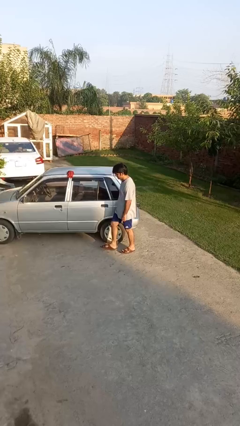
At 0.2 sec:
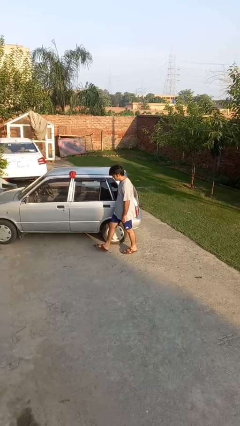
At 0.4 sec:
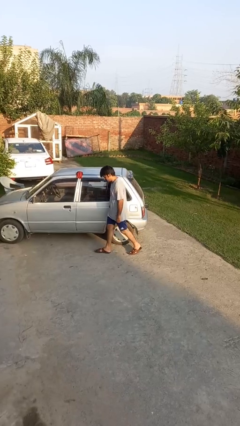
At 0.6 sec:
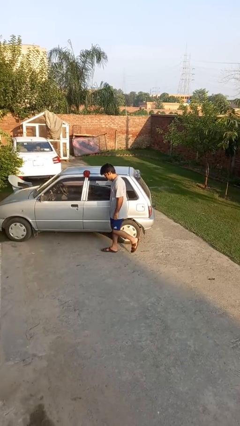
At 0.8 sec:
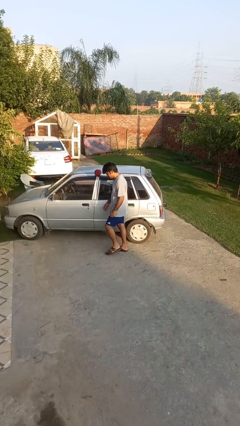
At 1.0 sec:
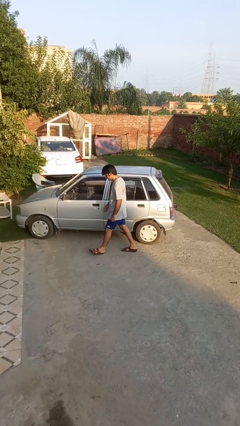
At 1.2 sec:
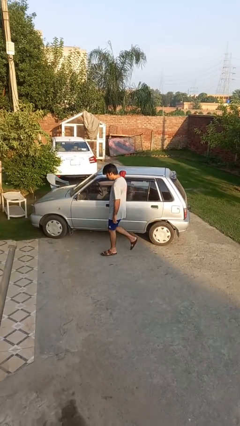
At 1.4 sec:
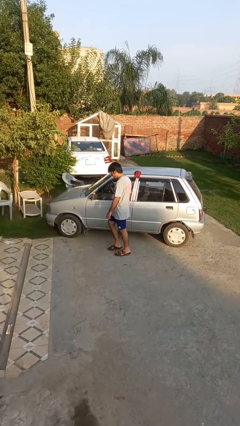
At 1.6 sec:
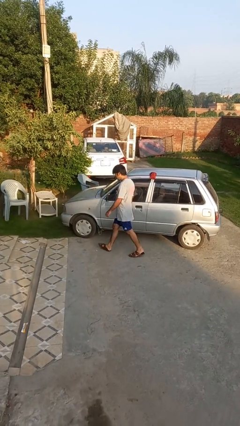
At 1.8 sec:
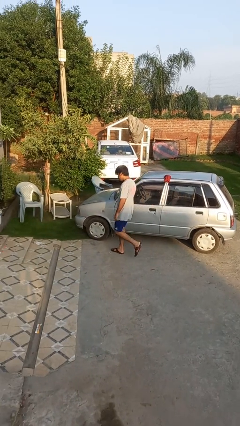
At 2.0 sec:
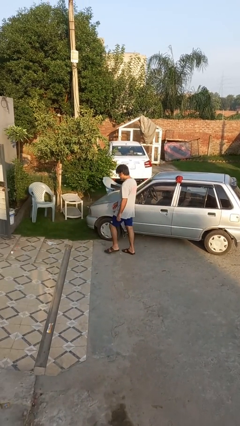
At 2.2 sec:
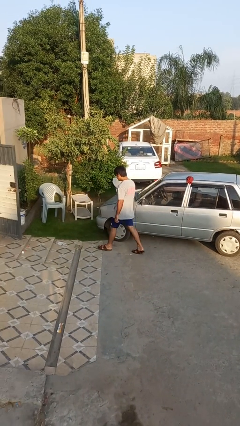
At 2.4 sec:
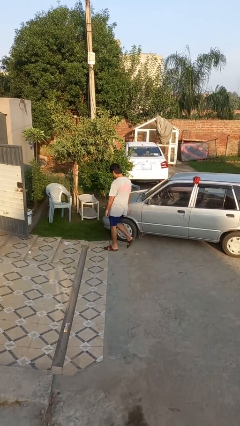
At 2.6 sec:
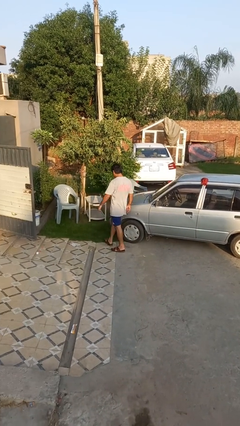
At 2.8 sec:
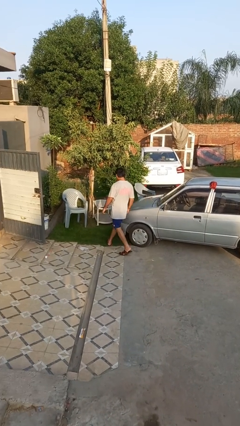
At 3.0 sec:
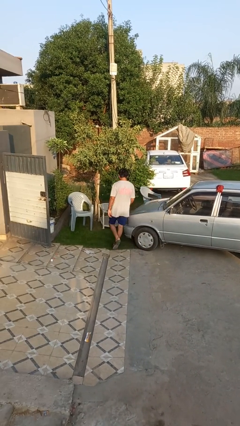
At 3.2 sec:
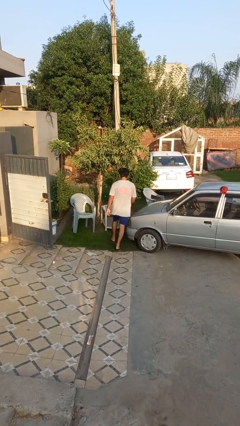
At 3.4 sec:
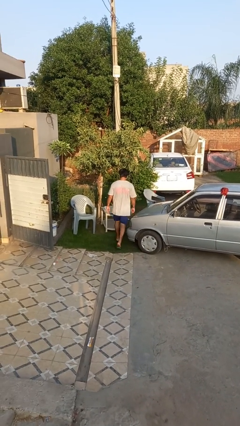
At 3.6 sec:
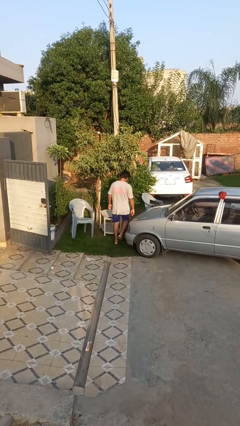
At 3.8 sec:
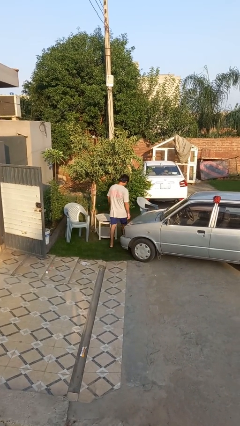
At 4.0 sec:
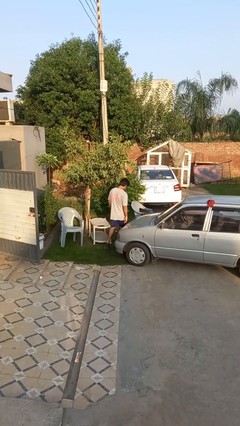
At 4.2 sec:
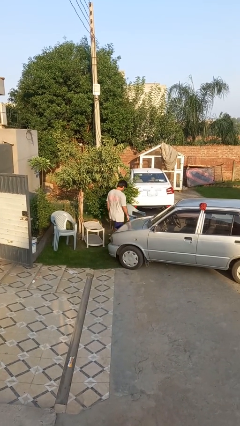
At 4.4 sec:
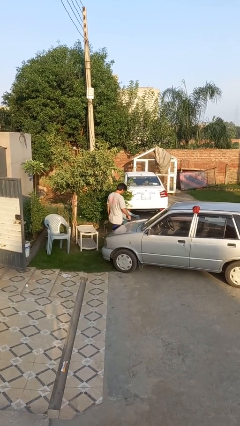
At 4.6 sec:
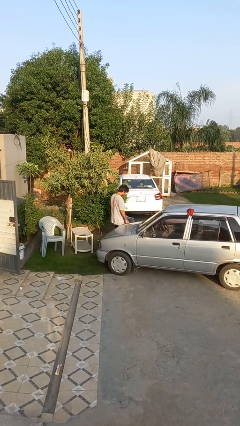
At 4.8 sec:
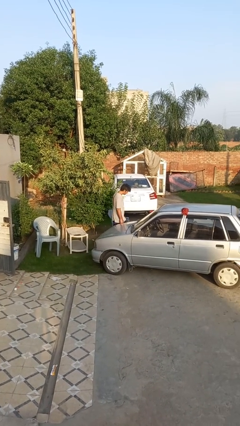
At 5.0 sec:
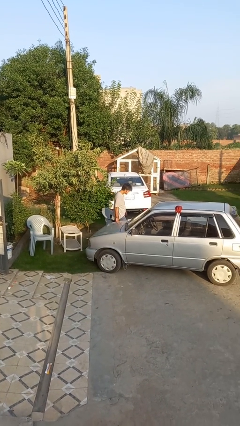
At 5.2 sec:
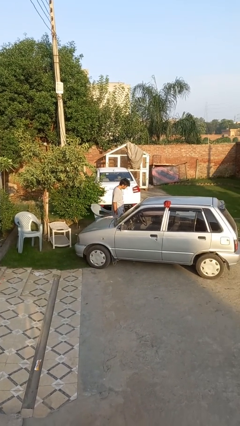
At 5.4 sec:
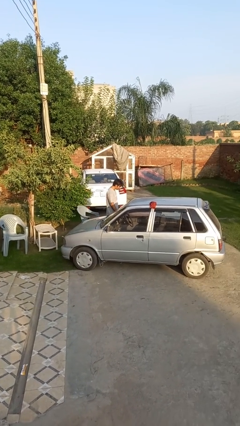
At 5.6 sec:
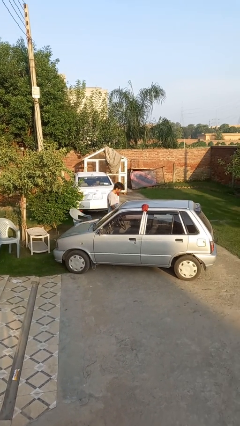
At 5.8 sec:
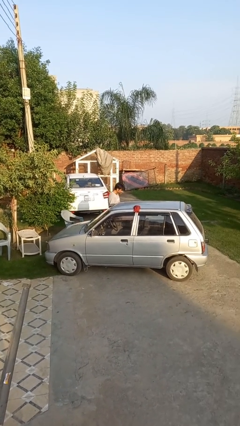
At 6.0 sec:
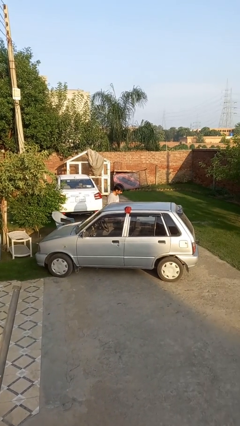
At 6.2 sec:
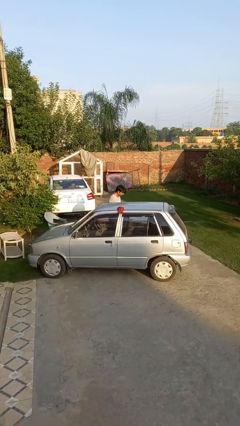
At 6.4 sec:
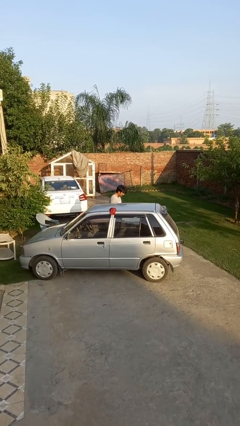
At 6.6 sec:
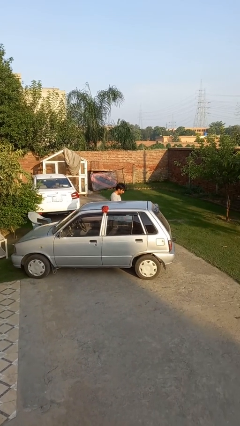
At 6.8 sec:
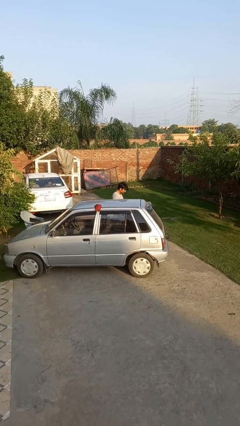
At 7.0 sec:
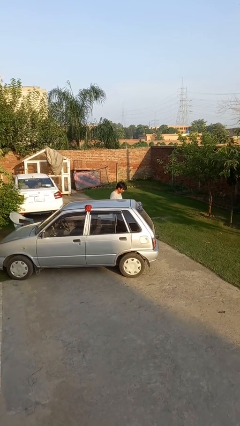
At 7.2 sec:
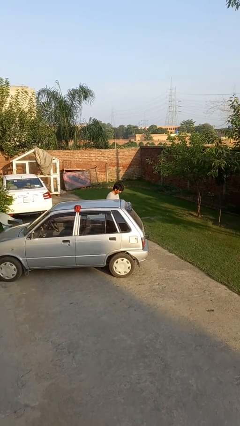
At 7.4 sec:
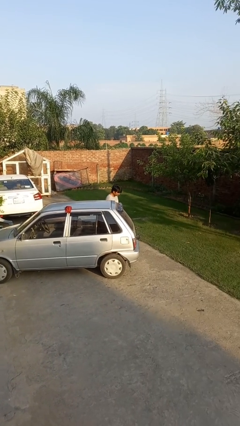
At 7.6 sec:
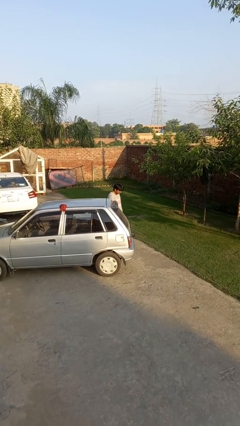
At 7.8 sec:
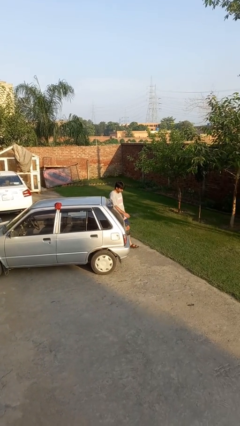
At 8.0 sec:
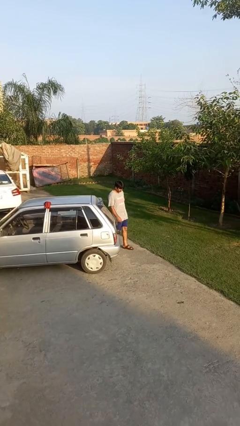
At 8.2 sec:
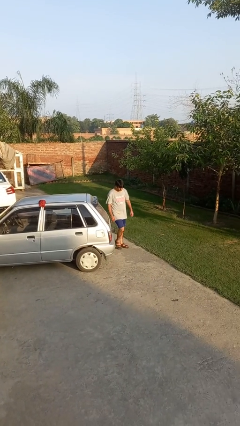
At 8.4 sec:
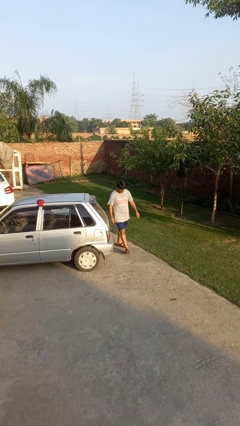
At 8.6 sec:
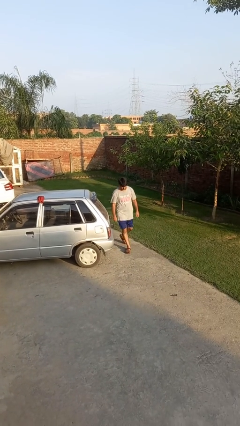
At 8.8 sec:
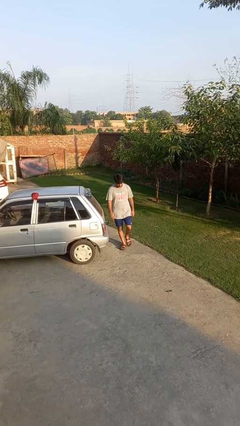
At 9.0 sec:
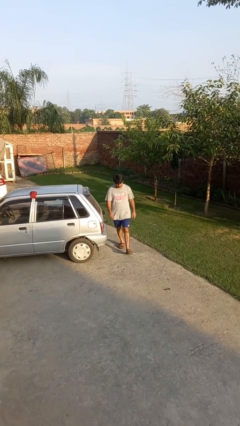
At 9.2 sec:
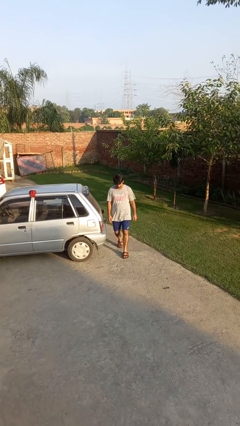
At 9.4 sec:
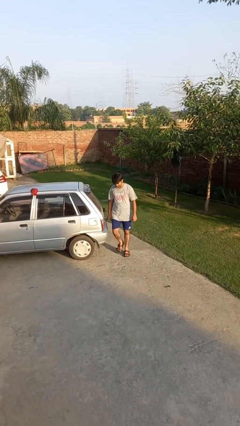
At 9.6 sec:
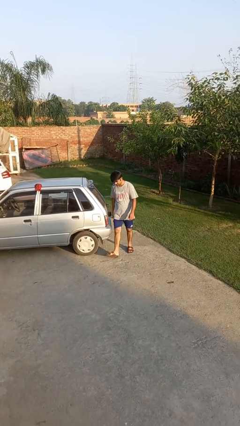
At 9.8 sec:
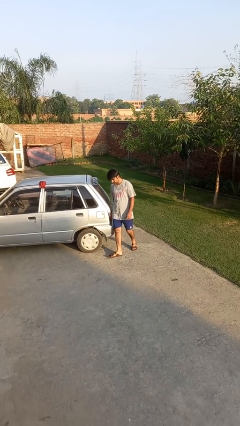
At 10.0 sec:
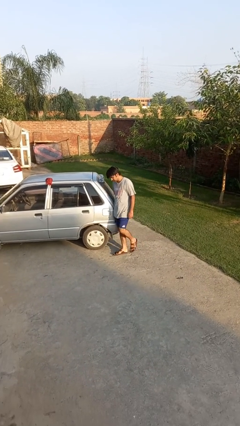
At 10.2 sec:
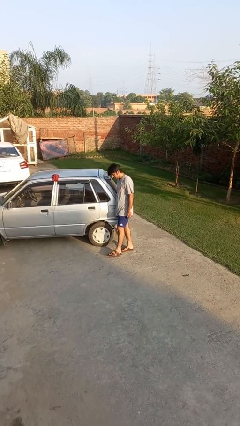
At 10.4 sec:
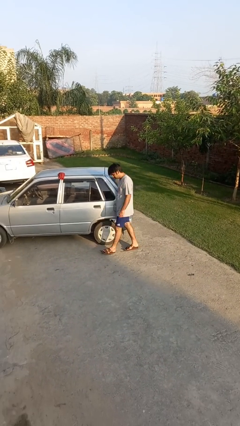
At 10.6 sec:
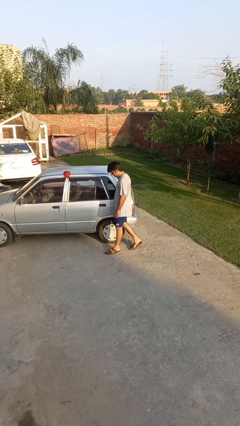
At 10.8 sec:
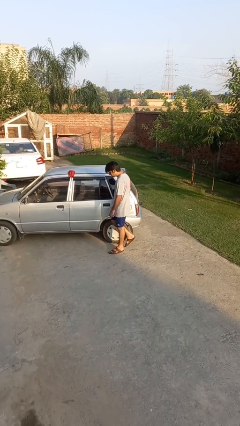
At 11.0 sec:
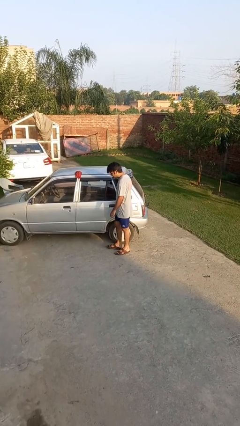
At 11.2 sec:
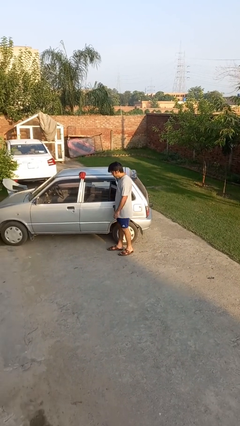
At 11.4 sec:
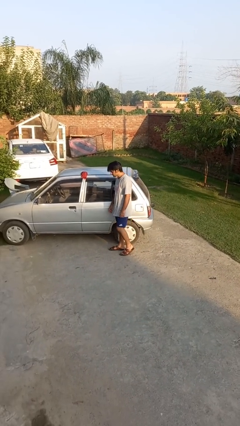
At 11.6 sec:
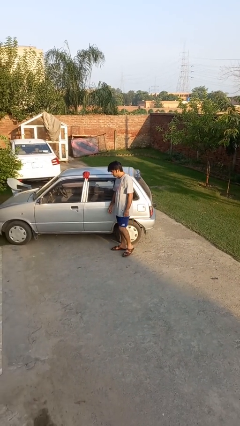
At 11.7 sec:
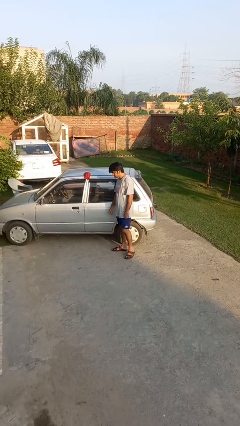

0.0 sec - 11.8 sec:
person walks around car

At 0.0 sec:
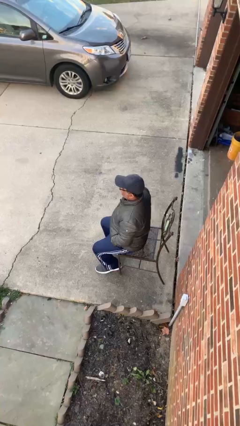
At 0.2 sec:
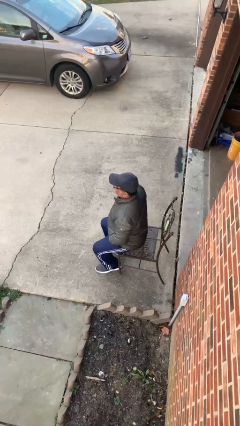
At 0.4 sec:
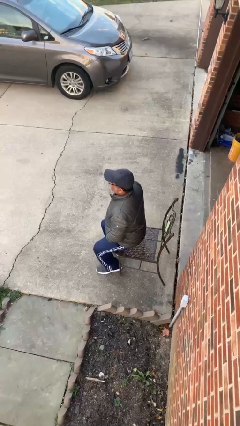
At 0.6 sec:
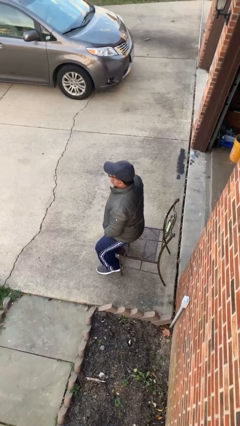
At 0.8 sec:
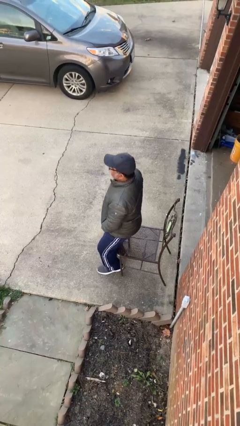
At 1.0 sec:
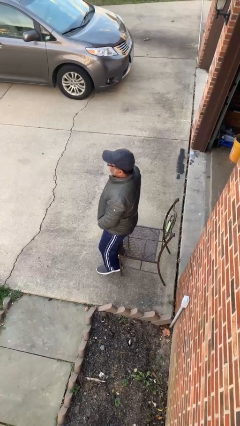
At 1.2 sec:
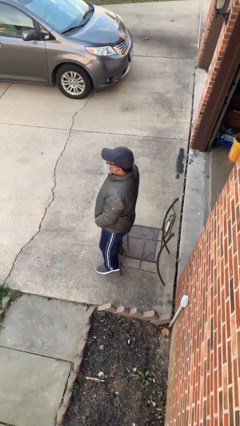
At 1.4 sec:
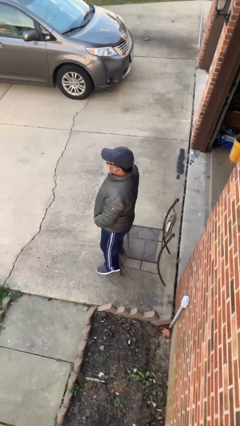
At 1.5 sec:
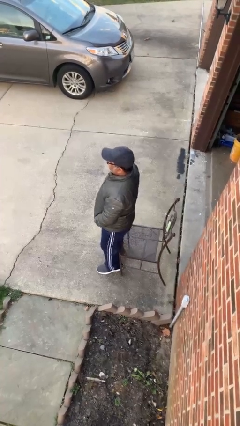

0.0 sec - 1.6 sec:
person stands up

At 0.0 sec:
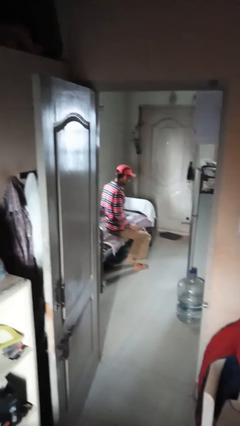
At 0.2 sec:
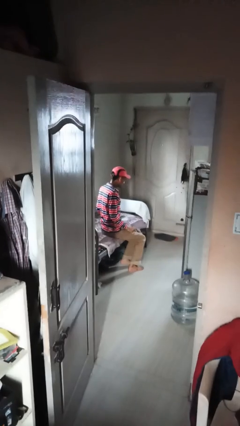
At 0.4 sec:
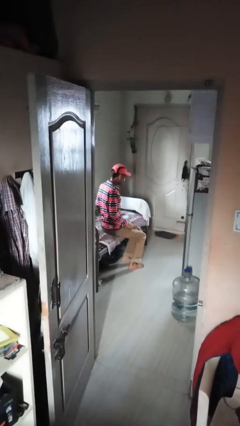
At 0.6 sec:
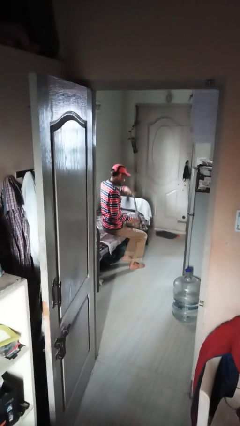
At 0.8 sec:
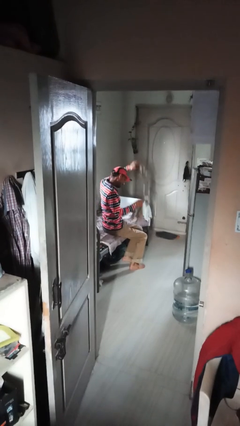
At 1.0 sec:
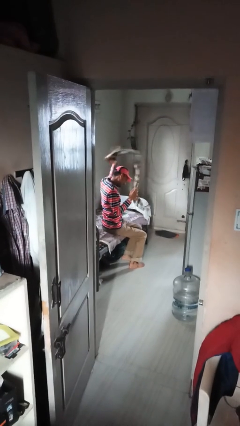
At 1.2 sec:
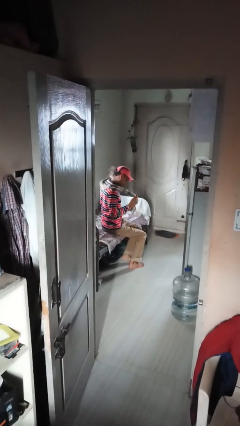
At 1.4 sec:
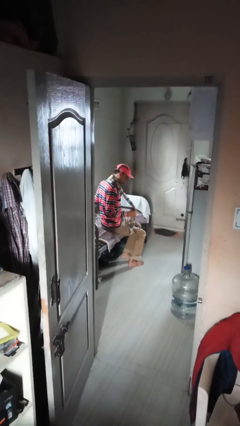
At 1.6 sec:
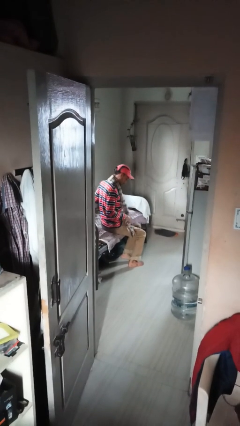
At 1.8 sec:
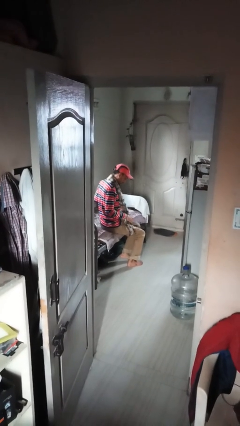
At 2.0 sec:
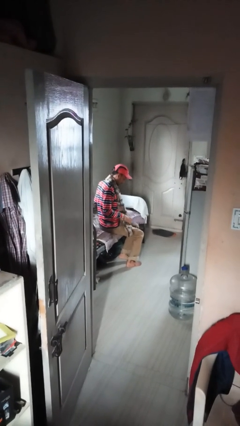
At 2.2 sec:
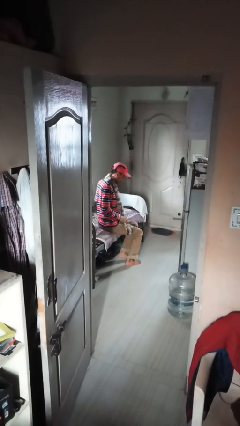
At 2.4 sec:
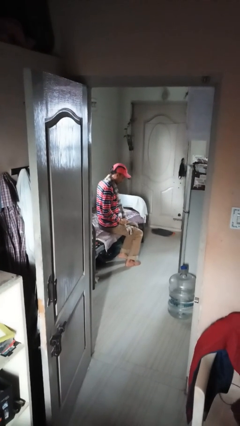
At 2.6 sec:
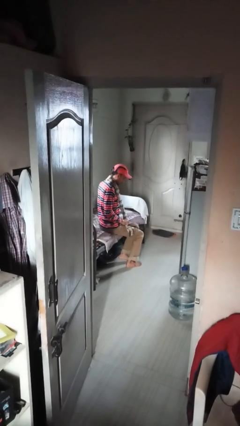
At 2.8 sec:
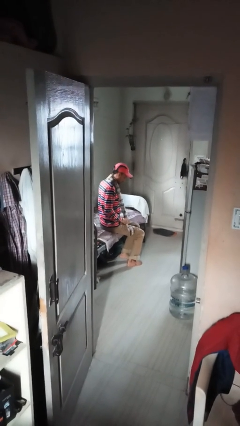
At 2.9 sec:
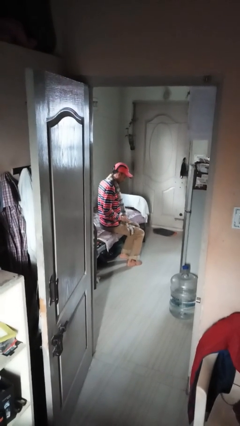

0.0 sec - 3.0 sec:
person puts on scarf

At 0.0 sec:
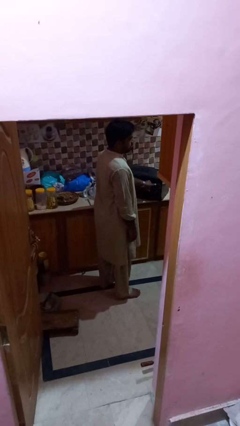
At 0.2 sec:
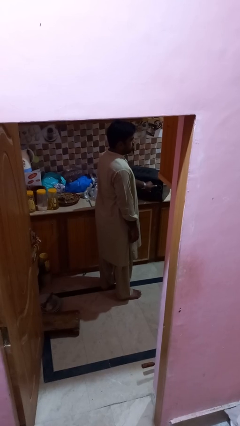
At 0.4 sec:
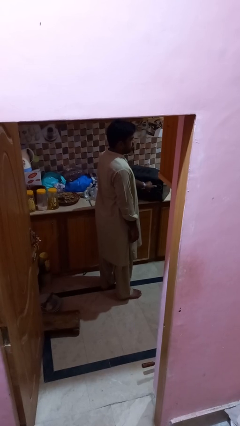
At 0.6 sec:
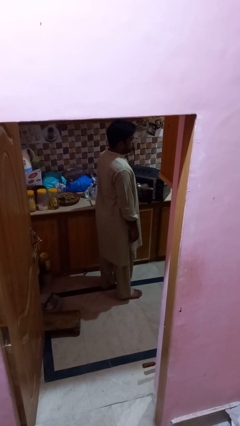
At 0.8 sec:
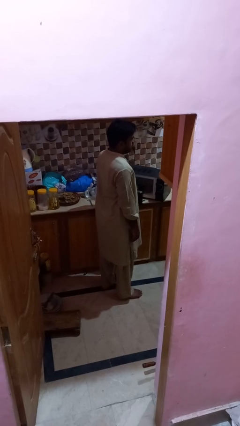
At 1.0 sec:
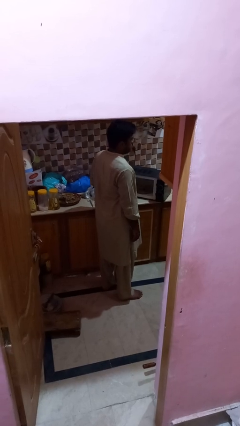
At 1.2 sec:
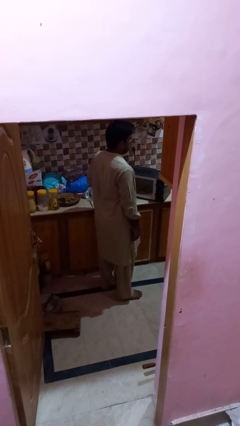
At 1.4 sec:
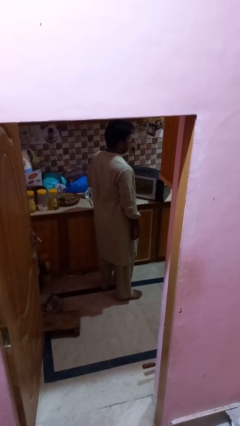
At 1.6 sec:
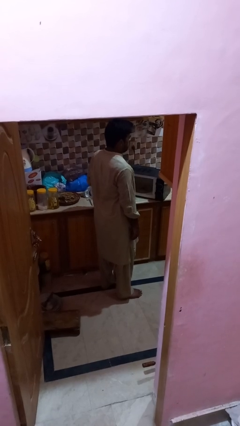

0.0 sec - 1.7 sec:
person opens microwave
